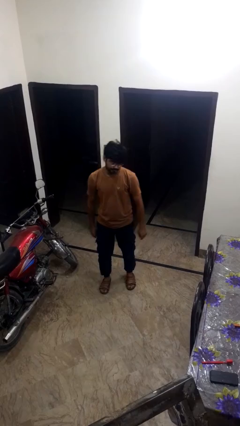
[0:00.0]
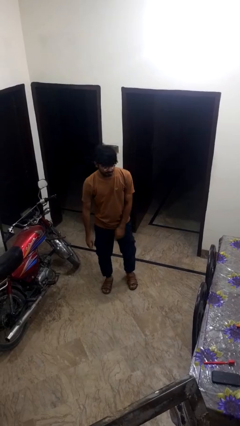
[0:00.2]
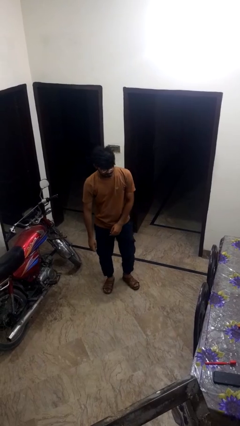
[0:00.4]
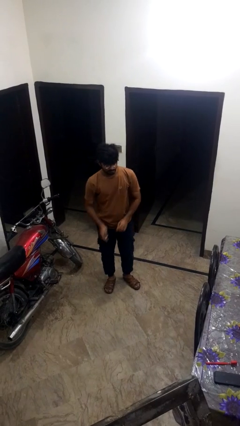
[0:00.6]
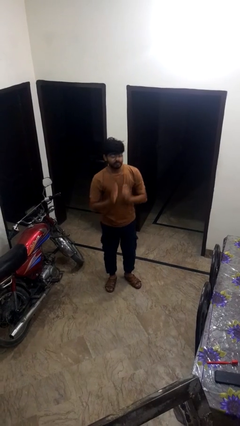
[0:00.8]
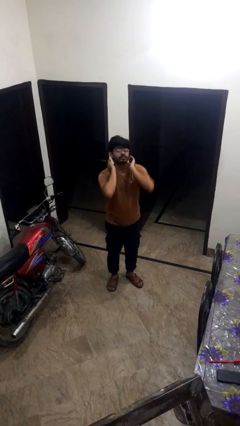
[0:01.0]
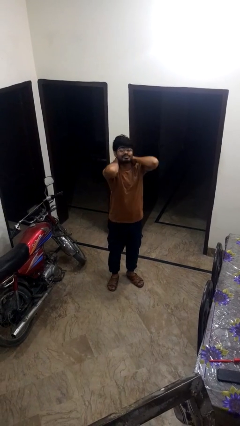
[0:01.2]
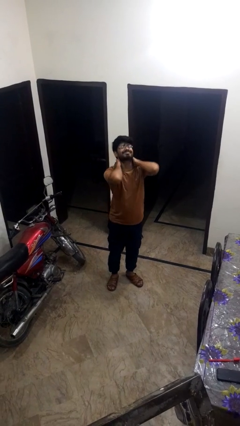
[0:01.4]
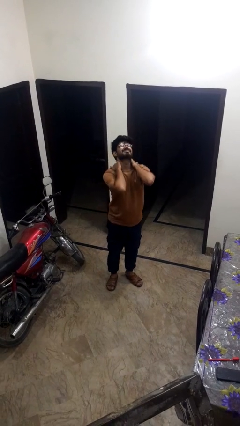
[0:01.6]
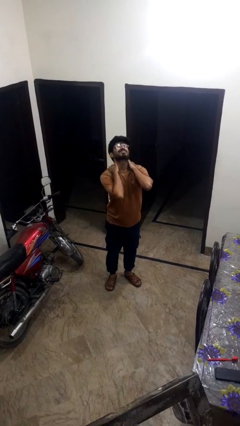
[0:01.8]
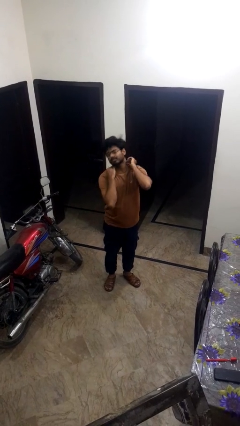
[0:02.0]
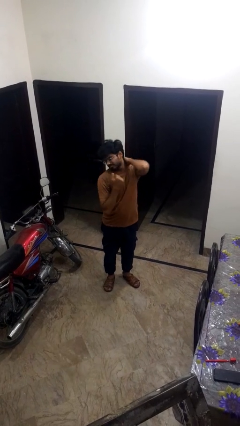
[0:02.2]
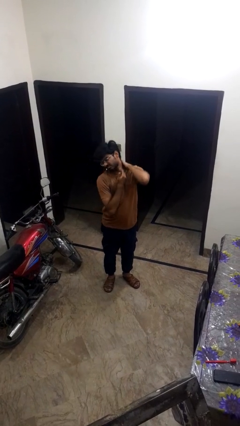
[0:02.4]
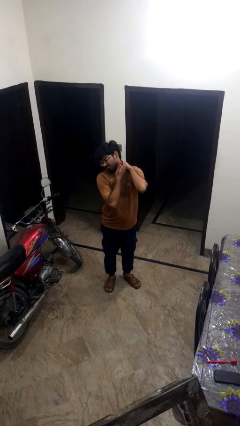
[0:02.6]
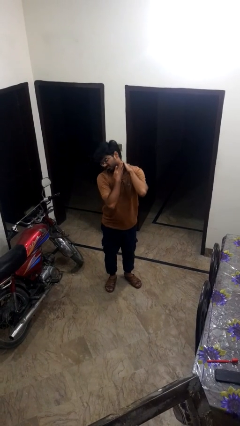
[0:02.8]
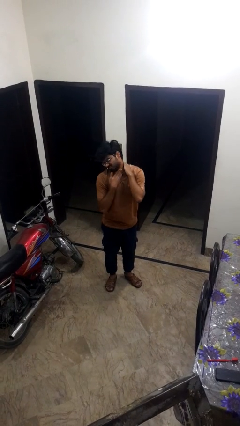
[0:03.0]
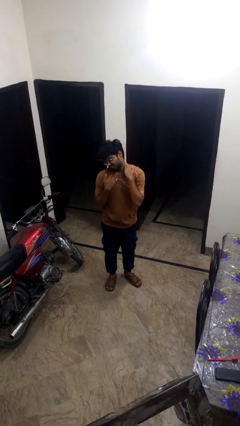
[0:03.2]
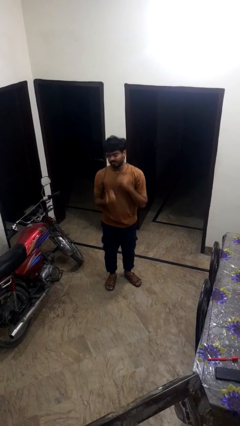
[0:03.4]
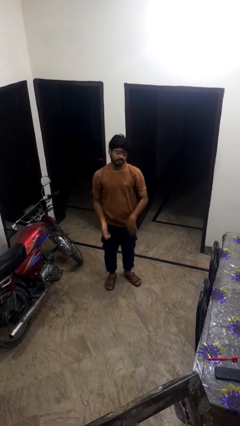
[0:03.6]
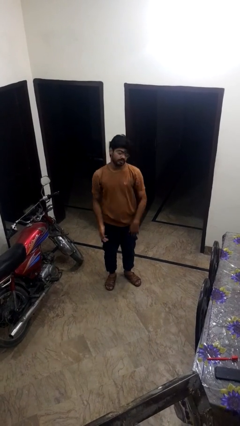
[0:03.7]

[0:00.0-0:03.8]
person rubs neck

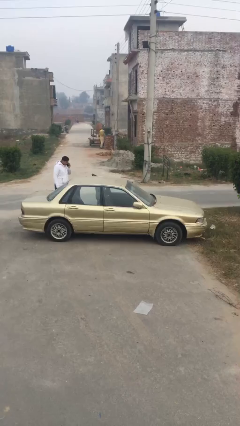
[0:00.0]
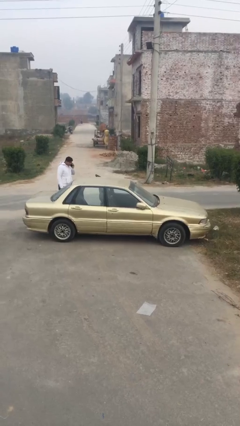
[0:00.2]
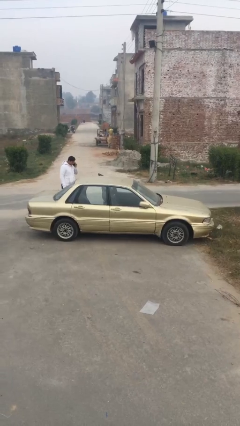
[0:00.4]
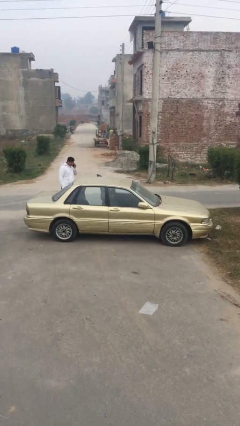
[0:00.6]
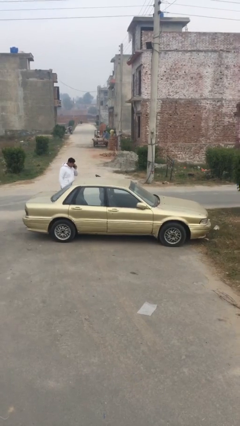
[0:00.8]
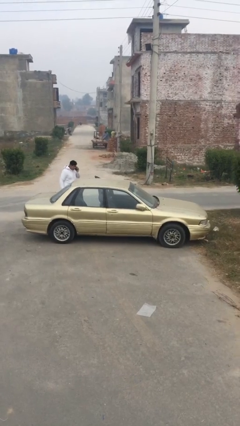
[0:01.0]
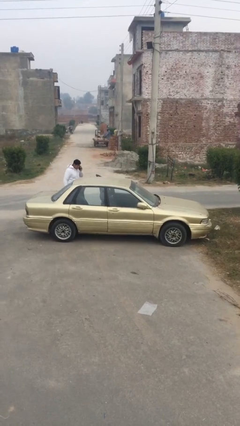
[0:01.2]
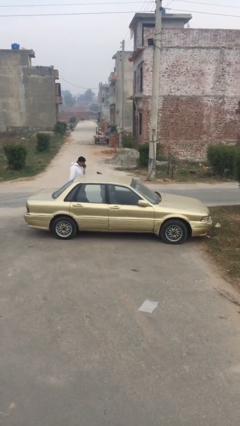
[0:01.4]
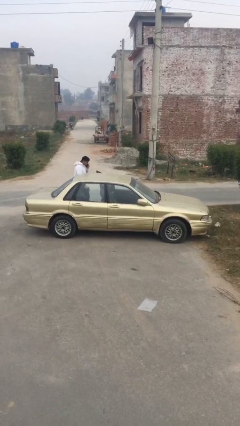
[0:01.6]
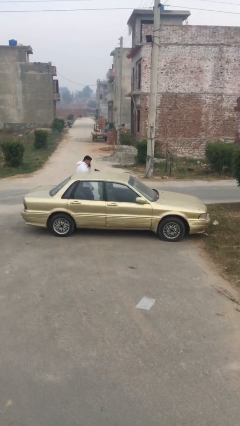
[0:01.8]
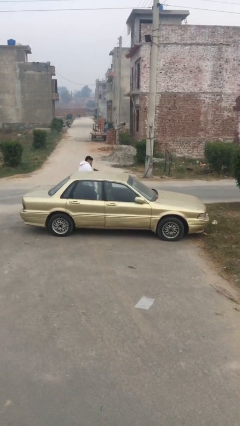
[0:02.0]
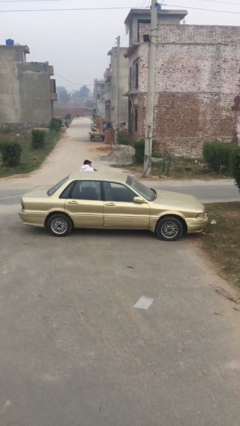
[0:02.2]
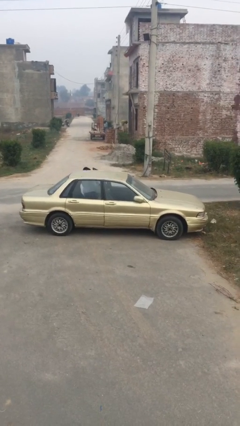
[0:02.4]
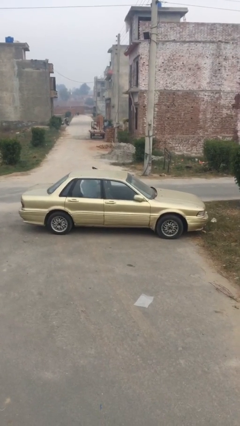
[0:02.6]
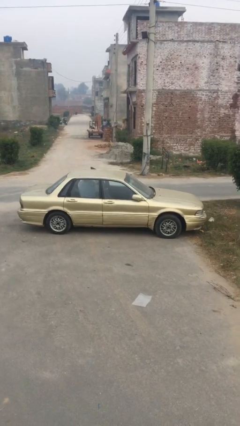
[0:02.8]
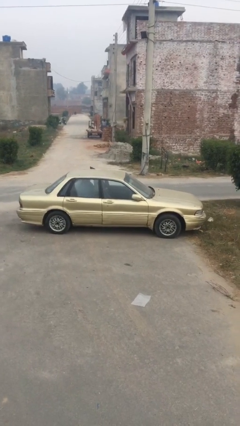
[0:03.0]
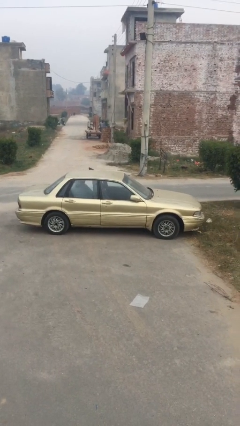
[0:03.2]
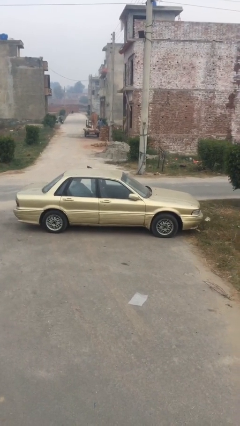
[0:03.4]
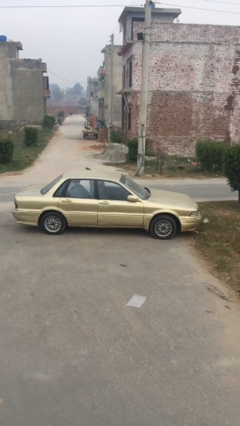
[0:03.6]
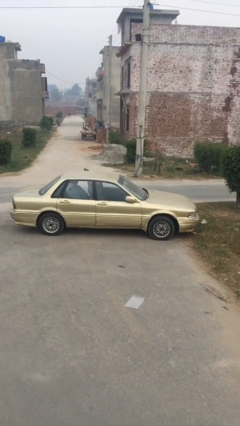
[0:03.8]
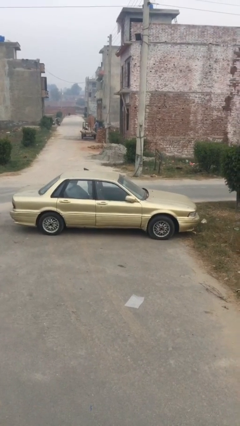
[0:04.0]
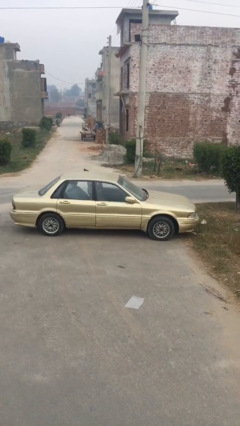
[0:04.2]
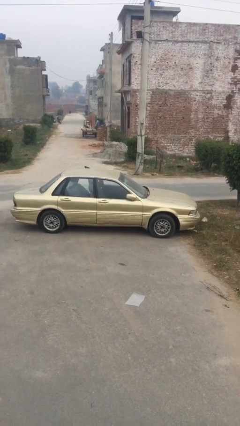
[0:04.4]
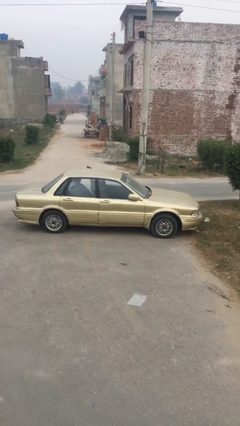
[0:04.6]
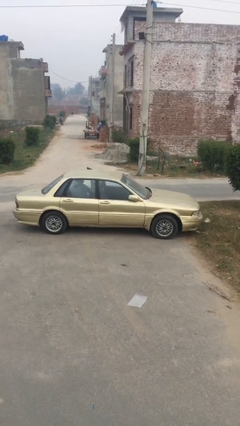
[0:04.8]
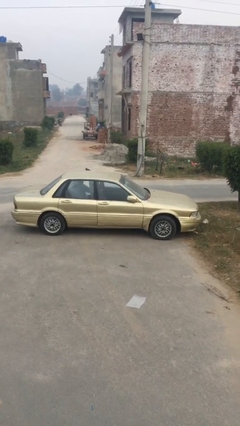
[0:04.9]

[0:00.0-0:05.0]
person enters car

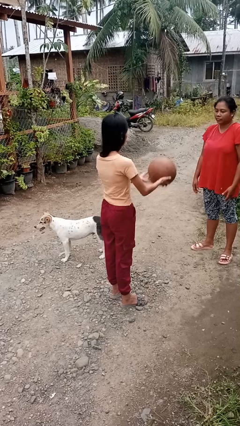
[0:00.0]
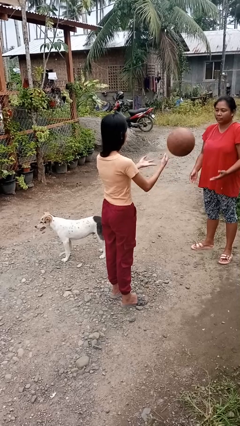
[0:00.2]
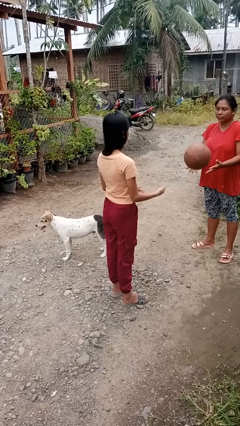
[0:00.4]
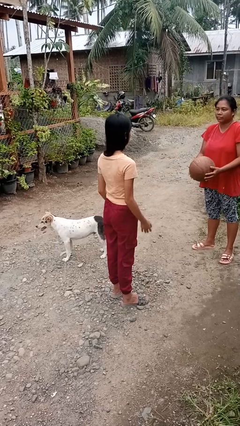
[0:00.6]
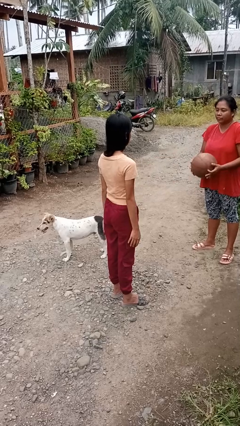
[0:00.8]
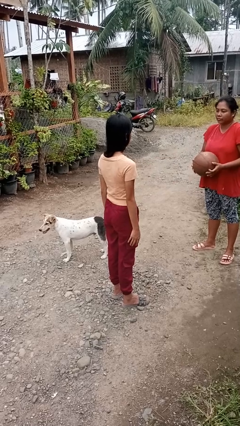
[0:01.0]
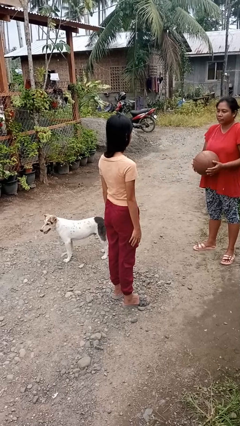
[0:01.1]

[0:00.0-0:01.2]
person throws object to person

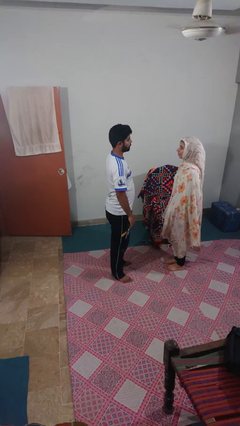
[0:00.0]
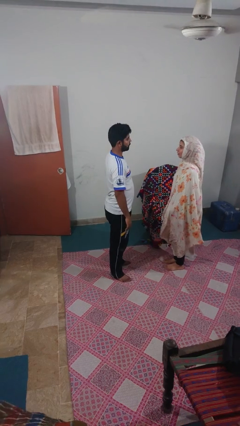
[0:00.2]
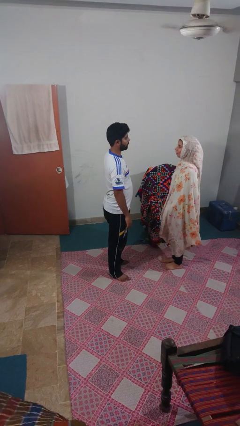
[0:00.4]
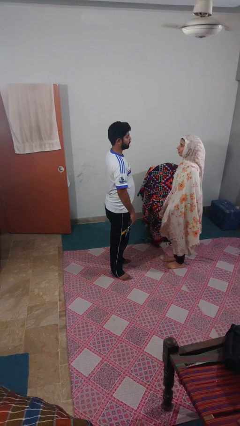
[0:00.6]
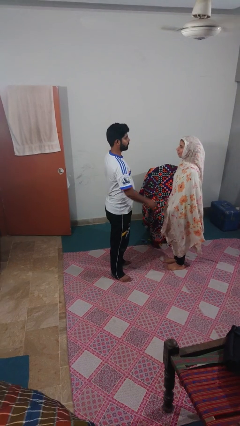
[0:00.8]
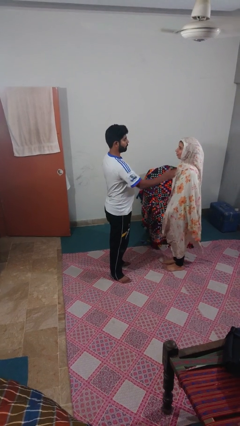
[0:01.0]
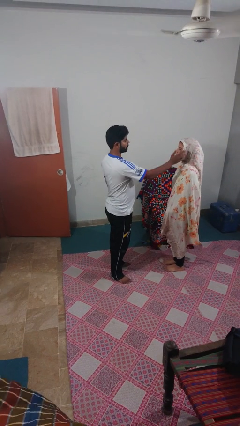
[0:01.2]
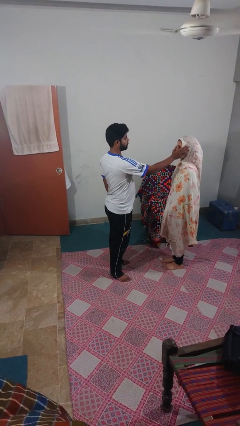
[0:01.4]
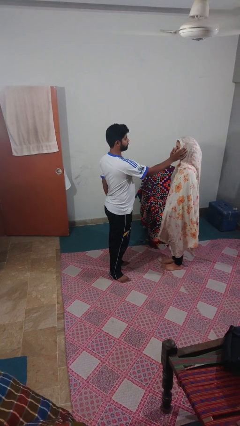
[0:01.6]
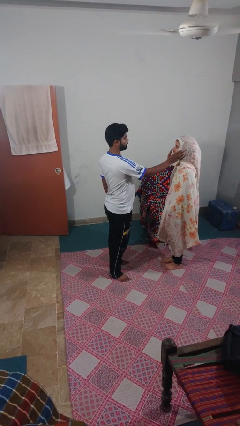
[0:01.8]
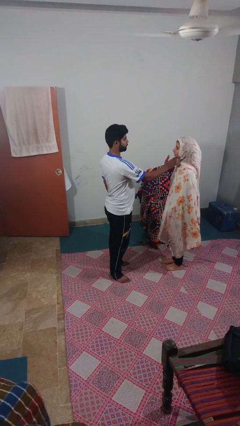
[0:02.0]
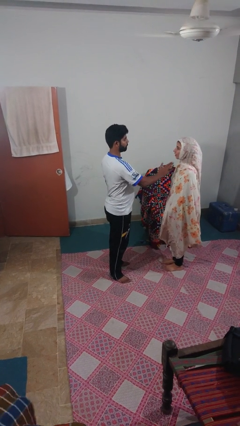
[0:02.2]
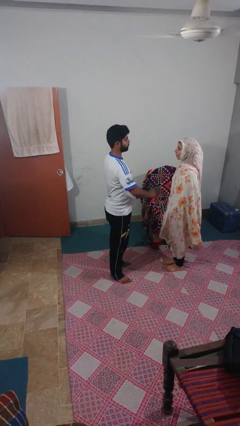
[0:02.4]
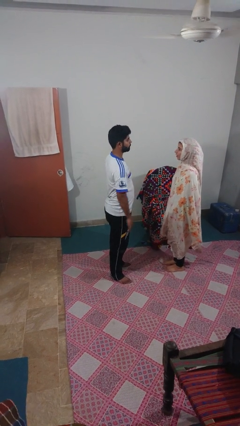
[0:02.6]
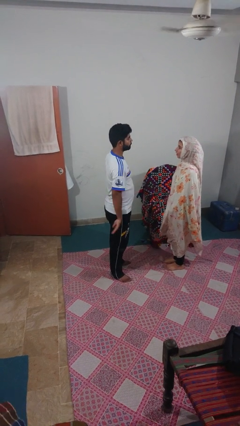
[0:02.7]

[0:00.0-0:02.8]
person touches face of person

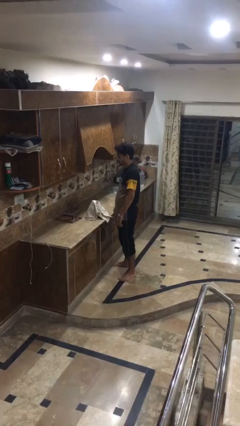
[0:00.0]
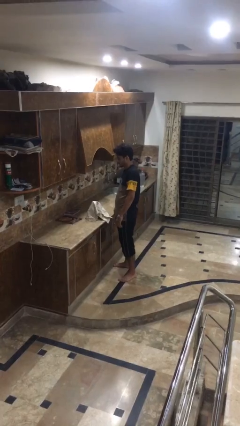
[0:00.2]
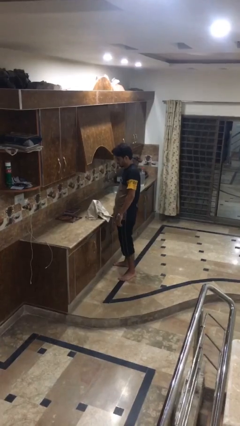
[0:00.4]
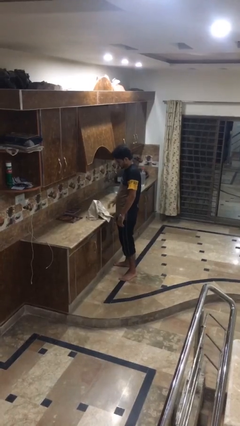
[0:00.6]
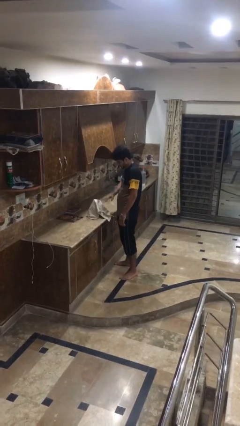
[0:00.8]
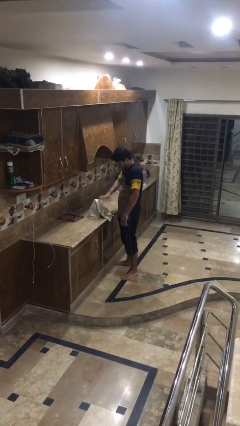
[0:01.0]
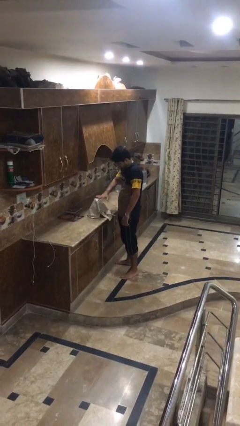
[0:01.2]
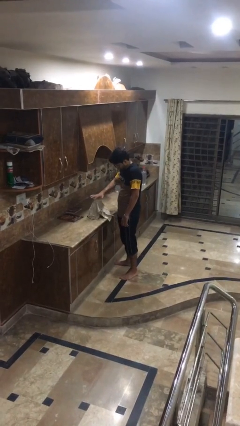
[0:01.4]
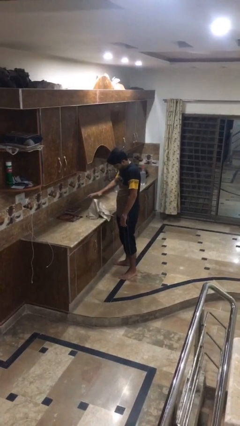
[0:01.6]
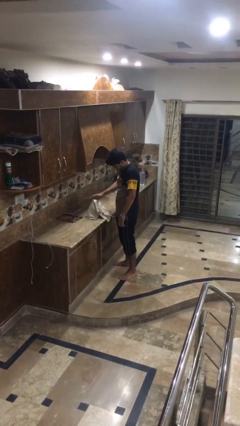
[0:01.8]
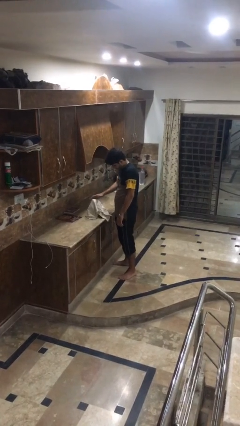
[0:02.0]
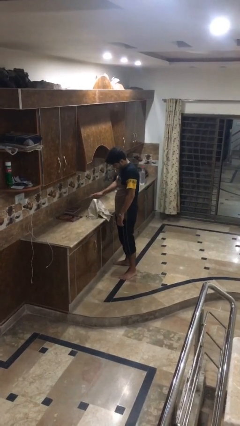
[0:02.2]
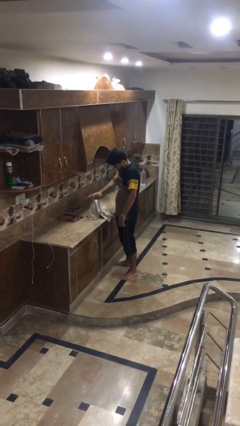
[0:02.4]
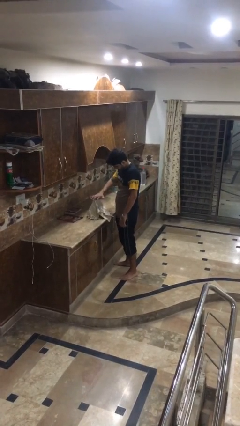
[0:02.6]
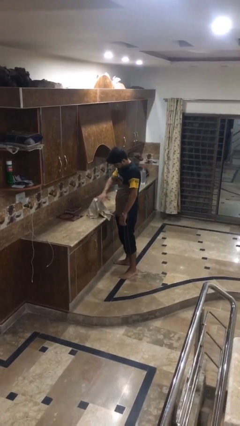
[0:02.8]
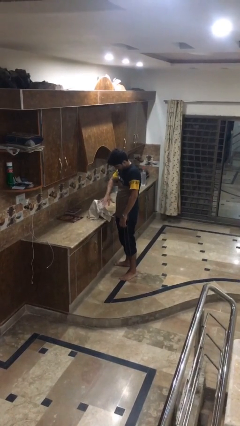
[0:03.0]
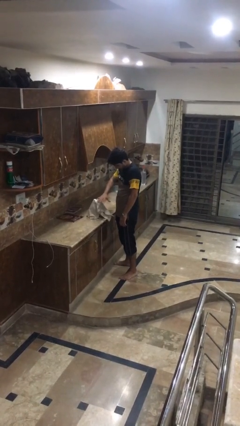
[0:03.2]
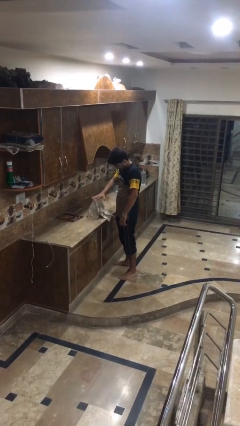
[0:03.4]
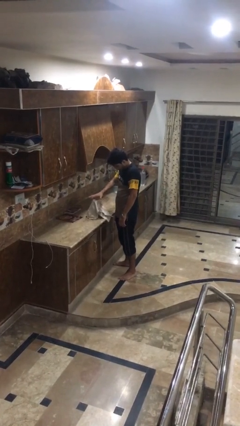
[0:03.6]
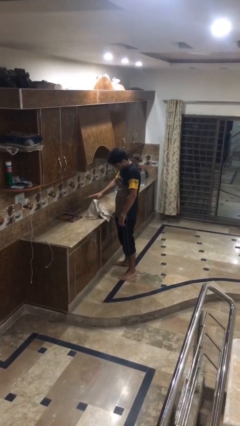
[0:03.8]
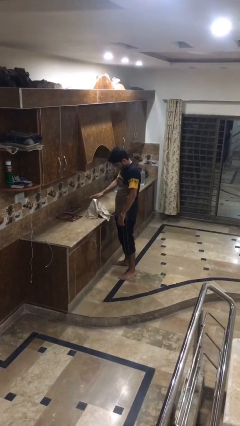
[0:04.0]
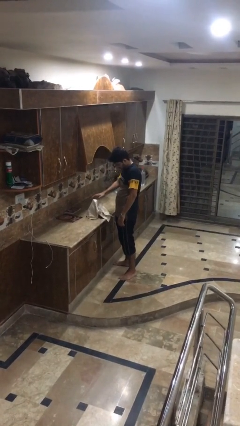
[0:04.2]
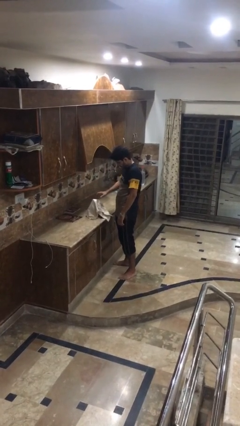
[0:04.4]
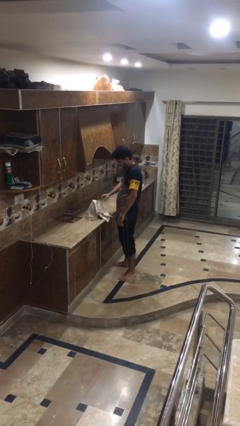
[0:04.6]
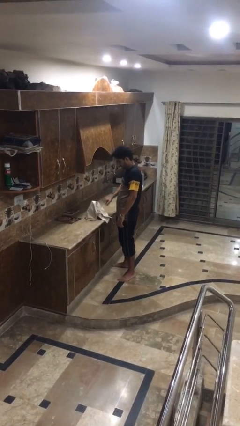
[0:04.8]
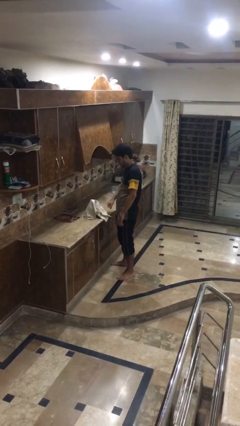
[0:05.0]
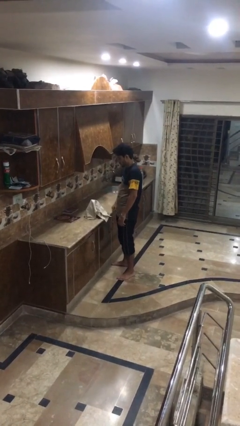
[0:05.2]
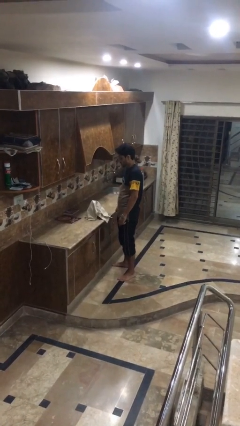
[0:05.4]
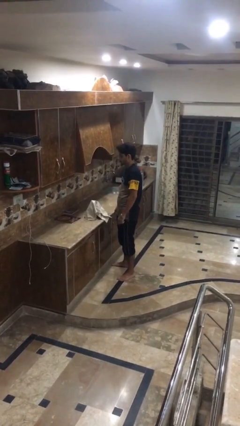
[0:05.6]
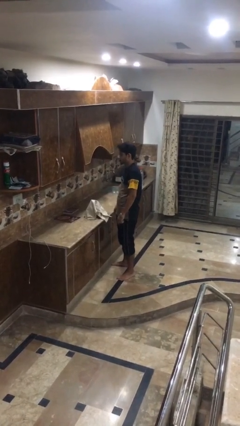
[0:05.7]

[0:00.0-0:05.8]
person waves hand over object
